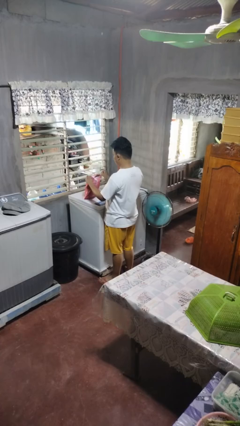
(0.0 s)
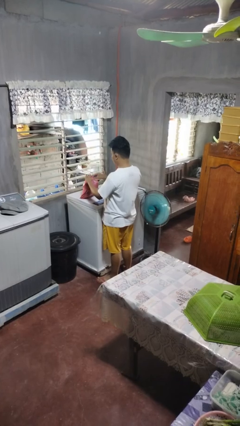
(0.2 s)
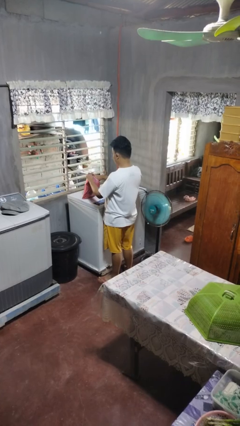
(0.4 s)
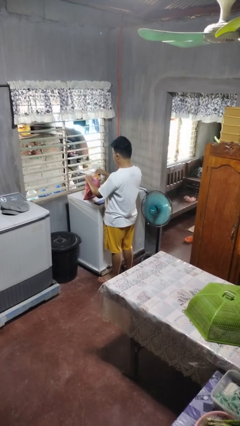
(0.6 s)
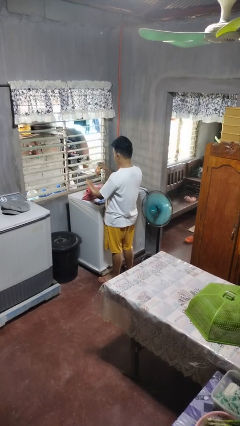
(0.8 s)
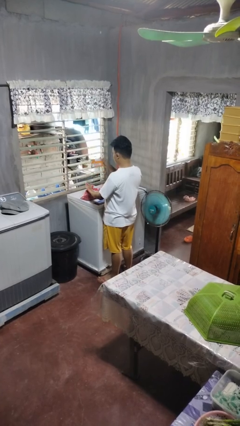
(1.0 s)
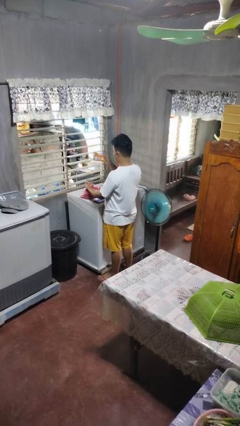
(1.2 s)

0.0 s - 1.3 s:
person takes object from bag

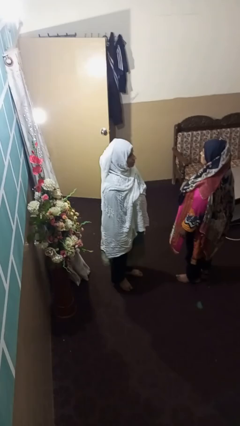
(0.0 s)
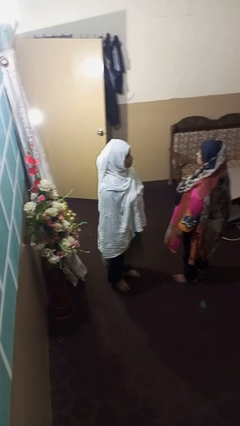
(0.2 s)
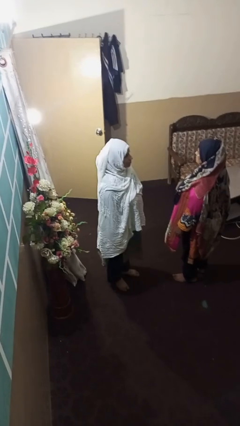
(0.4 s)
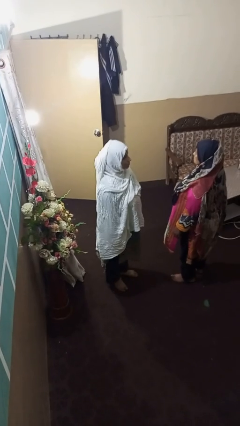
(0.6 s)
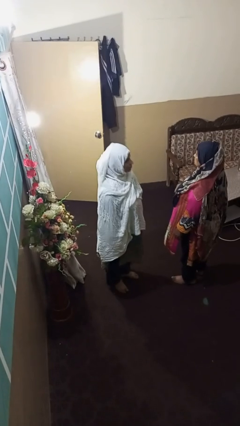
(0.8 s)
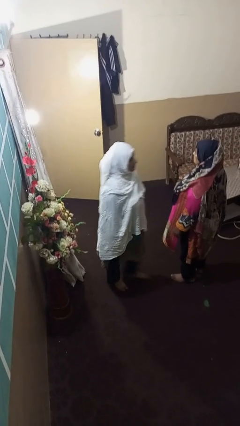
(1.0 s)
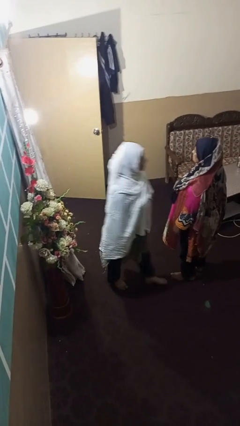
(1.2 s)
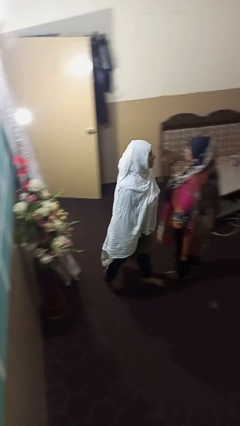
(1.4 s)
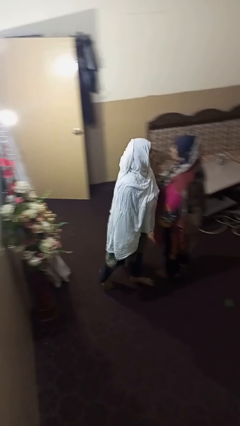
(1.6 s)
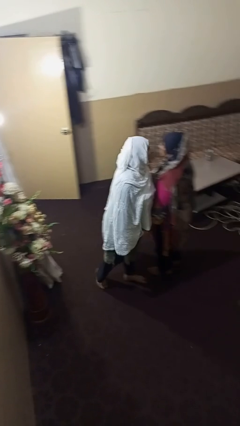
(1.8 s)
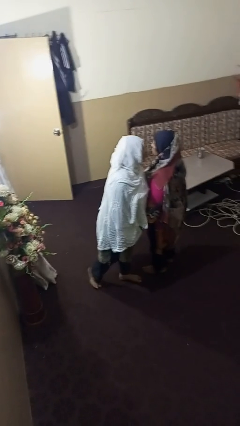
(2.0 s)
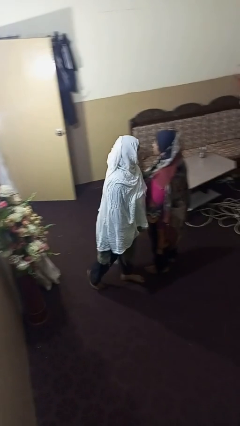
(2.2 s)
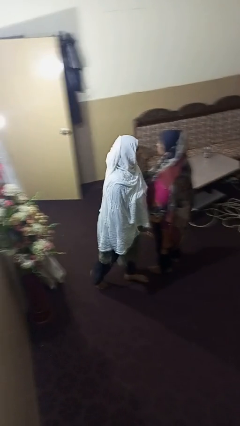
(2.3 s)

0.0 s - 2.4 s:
person laughs with person

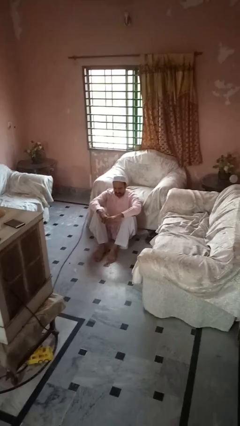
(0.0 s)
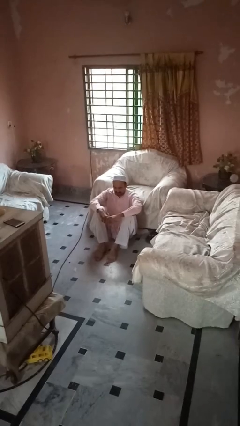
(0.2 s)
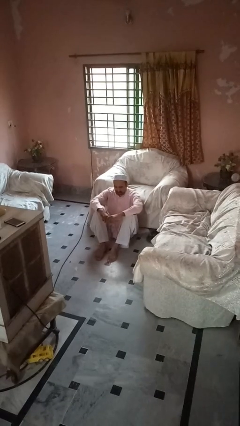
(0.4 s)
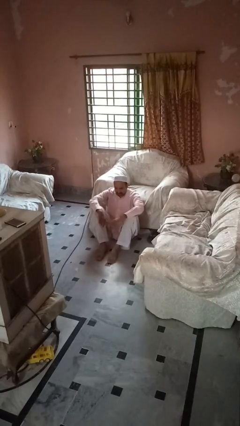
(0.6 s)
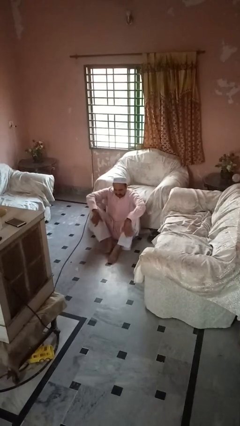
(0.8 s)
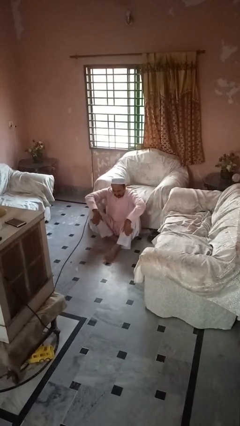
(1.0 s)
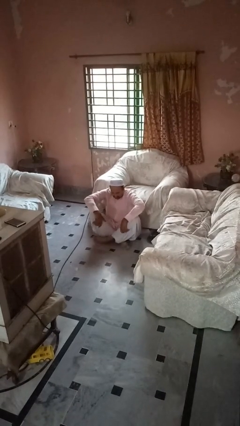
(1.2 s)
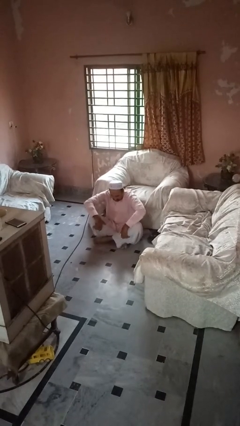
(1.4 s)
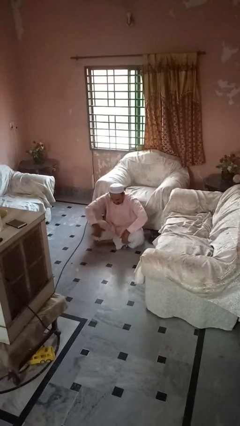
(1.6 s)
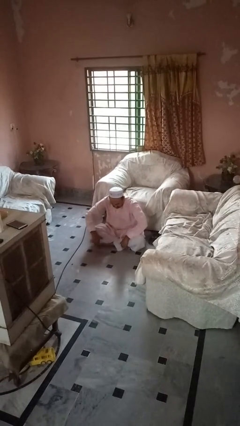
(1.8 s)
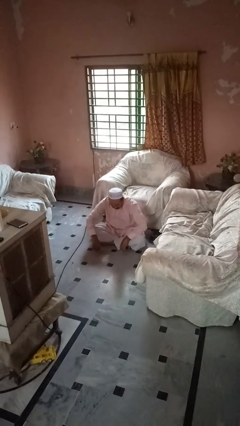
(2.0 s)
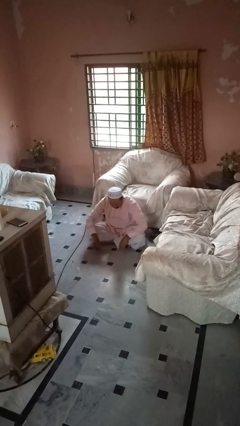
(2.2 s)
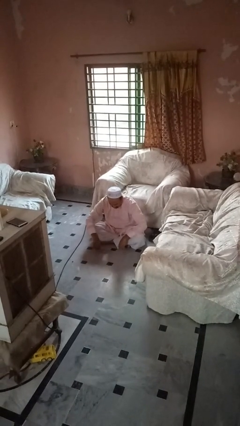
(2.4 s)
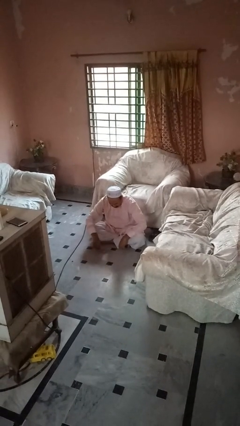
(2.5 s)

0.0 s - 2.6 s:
person crosses legs

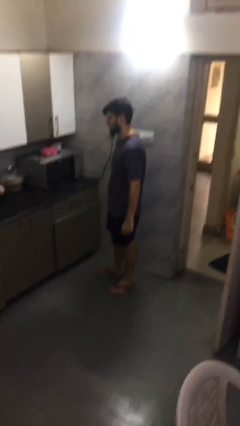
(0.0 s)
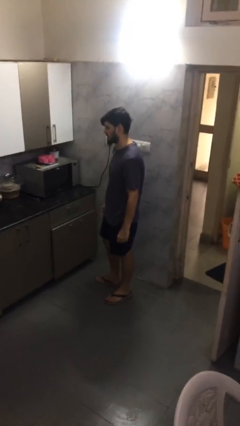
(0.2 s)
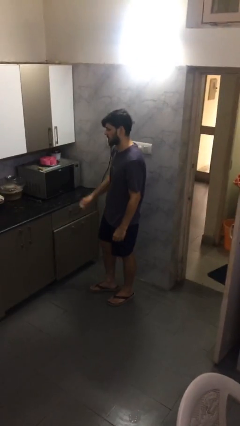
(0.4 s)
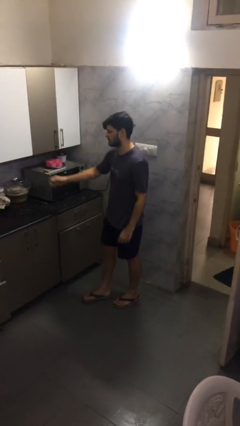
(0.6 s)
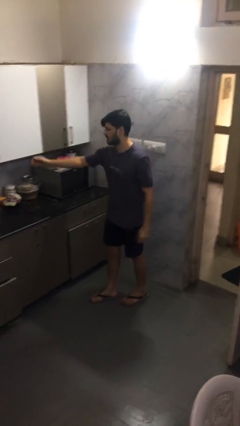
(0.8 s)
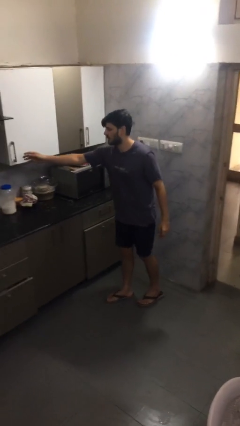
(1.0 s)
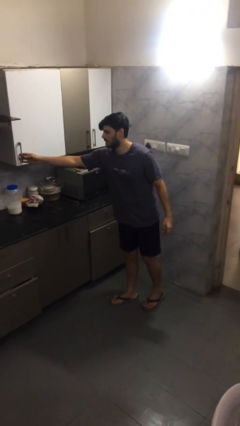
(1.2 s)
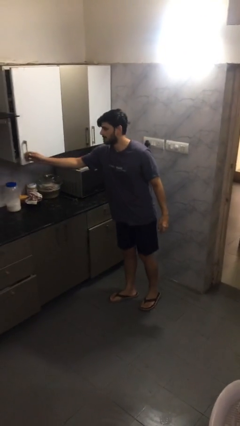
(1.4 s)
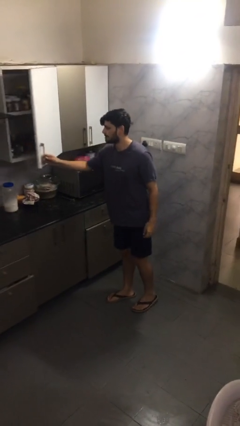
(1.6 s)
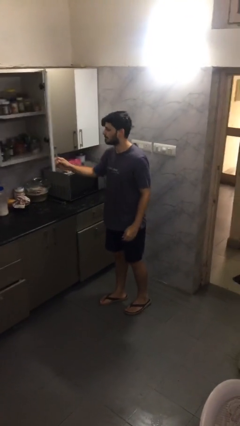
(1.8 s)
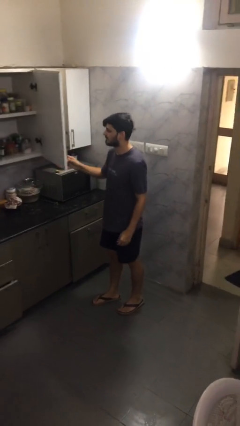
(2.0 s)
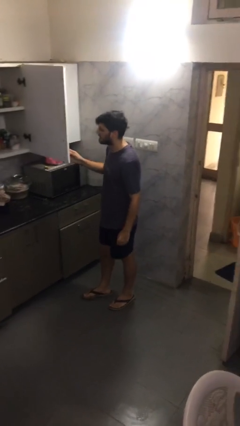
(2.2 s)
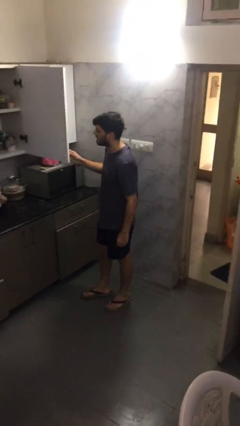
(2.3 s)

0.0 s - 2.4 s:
person opens cabinet

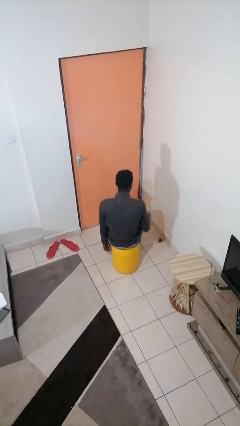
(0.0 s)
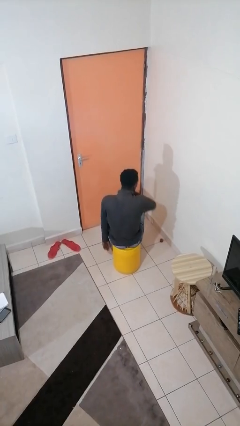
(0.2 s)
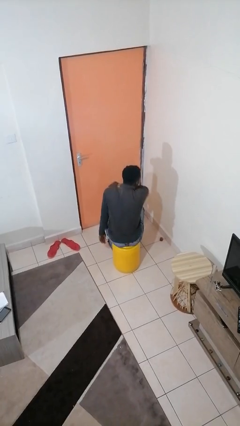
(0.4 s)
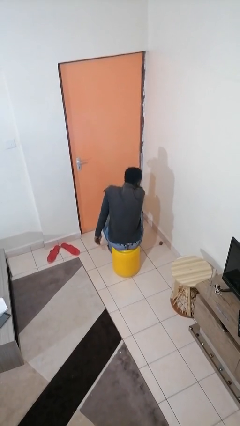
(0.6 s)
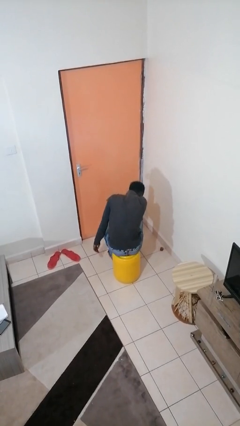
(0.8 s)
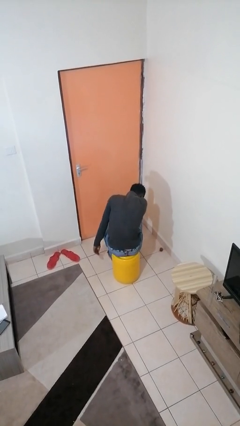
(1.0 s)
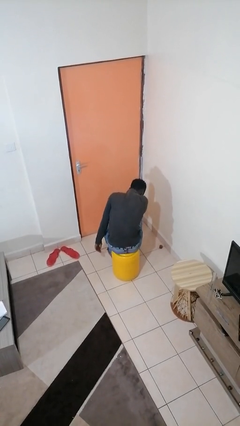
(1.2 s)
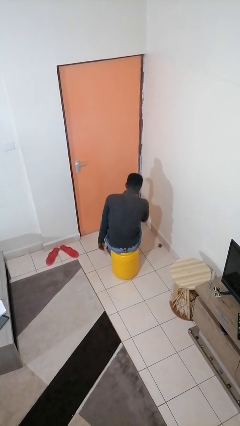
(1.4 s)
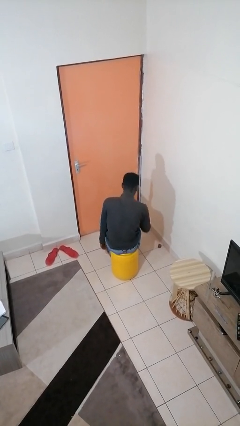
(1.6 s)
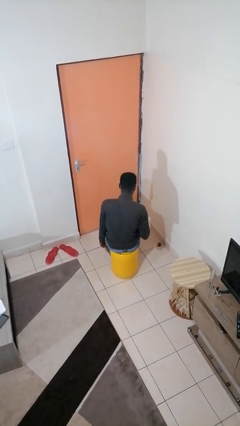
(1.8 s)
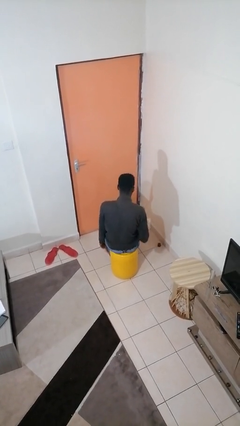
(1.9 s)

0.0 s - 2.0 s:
person sneezes into arm

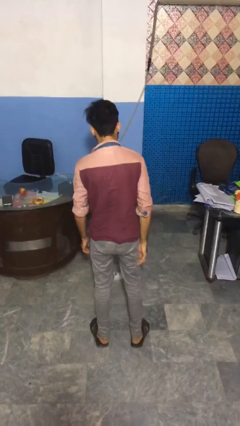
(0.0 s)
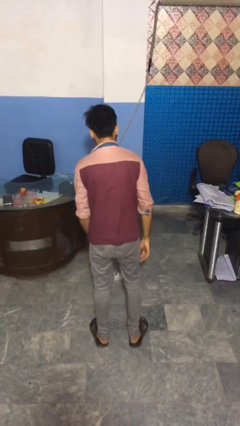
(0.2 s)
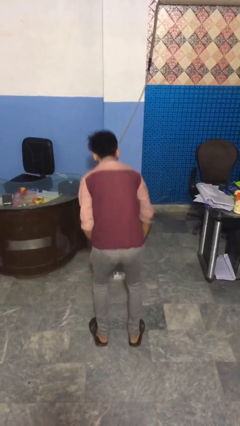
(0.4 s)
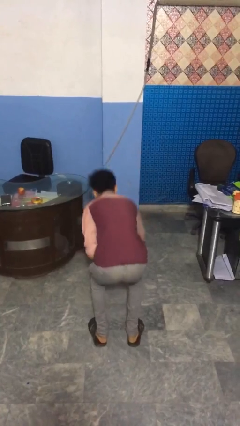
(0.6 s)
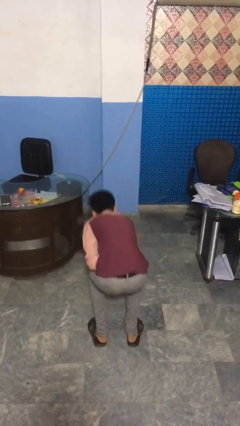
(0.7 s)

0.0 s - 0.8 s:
person picks up object from floor

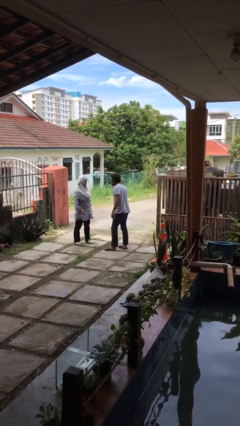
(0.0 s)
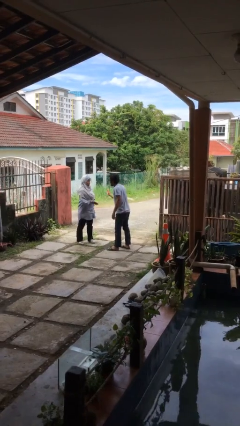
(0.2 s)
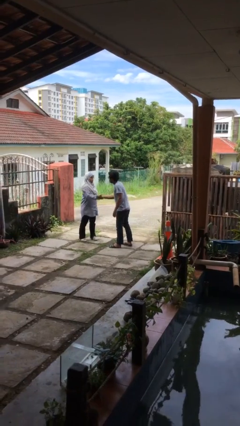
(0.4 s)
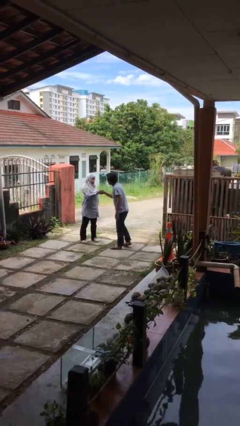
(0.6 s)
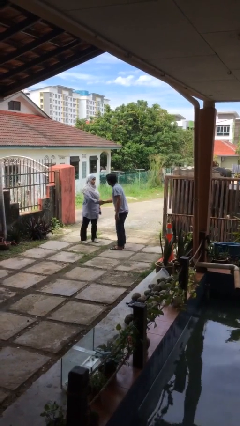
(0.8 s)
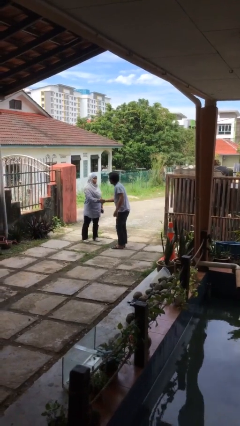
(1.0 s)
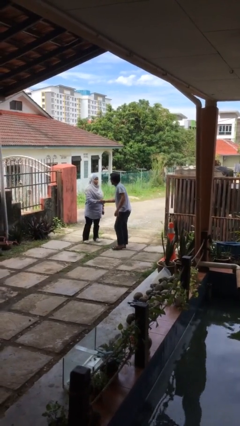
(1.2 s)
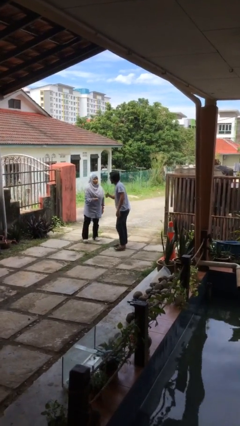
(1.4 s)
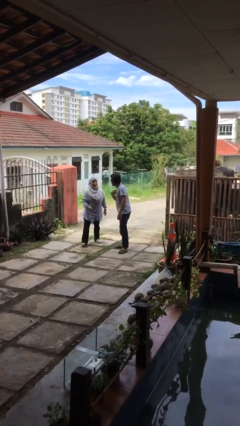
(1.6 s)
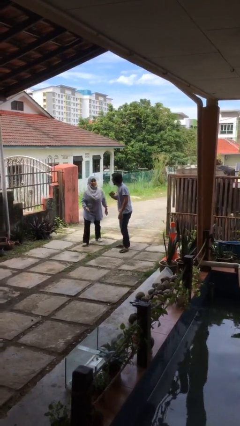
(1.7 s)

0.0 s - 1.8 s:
person shakes hand

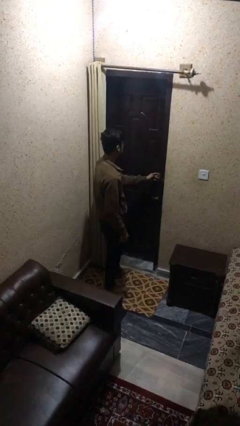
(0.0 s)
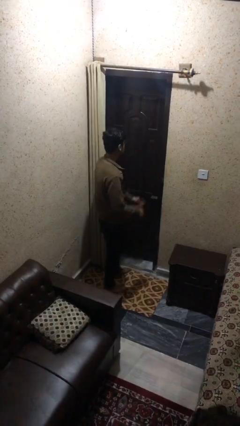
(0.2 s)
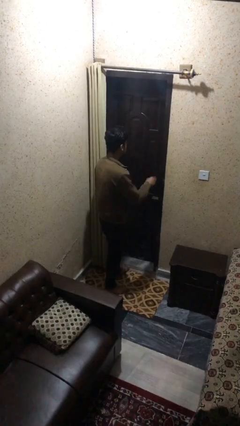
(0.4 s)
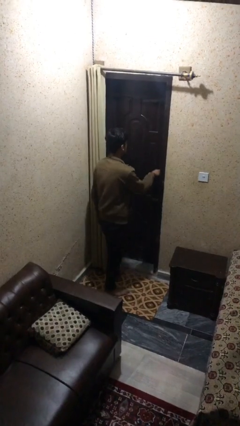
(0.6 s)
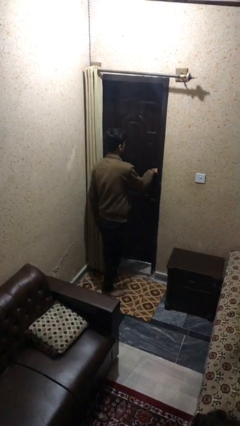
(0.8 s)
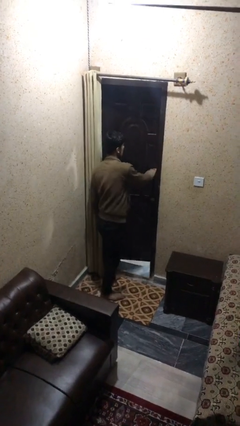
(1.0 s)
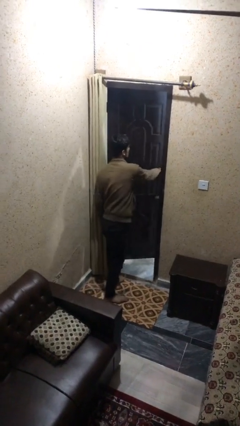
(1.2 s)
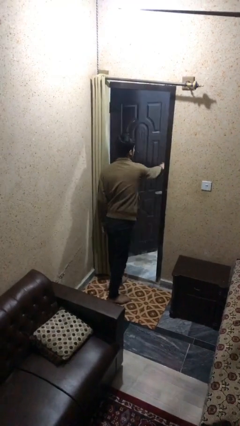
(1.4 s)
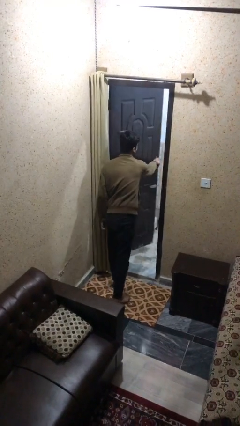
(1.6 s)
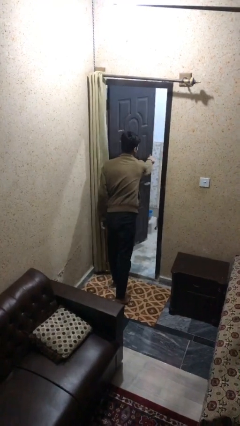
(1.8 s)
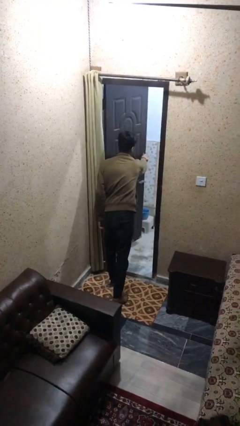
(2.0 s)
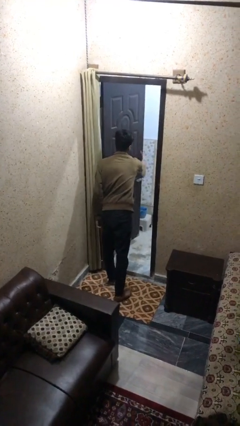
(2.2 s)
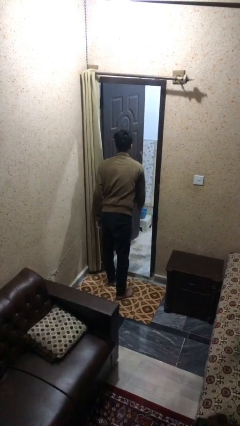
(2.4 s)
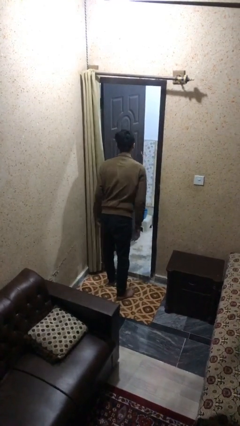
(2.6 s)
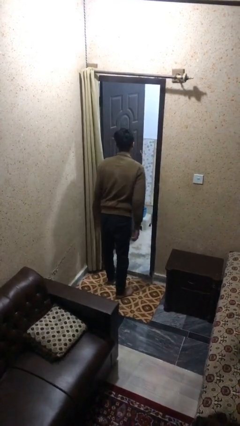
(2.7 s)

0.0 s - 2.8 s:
person opens facility door

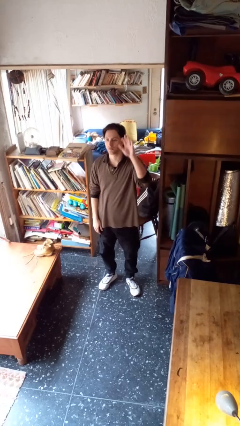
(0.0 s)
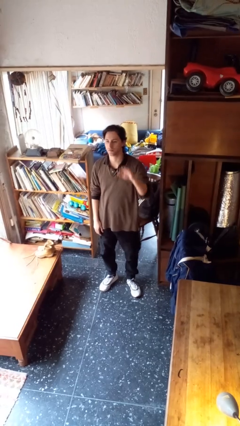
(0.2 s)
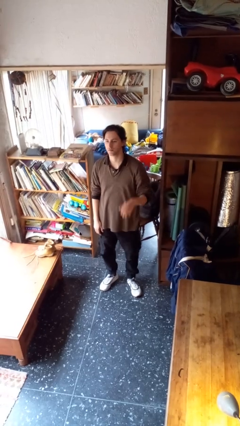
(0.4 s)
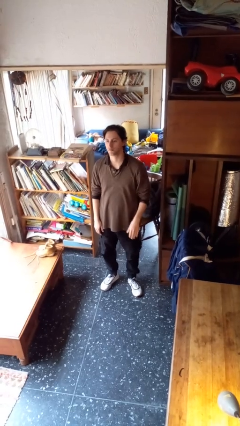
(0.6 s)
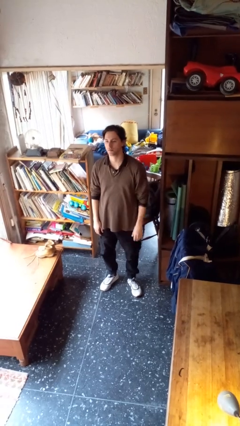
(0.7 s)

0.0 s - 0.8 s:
person gestures lower hand

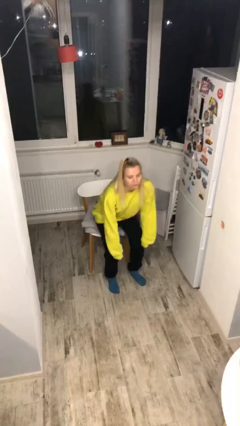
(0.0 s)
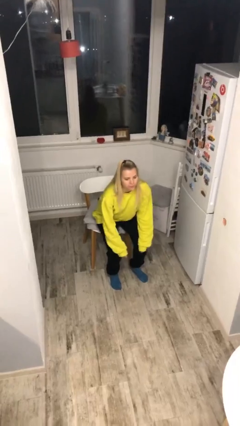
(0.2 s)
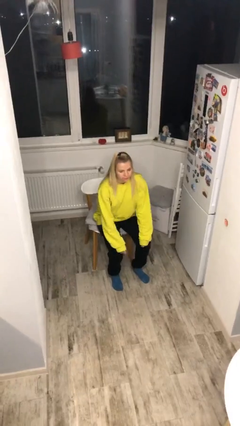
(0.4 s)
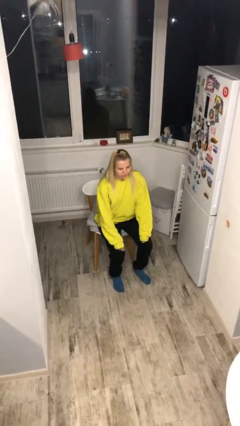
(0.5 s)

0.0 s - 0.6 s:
person sits down
